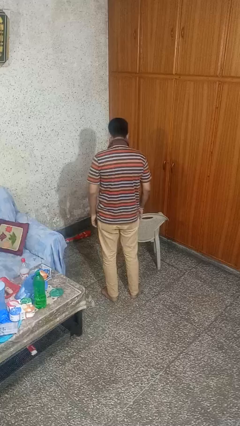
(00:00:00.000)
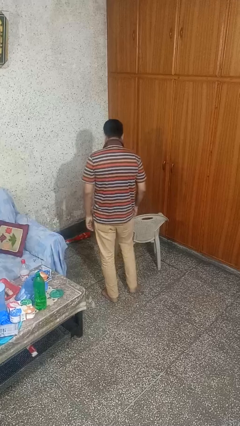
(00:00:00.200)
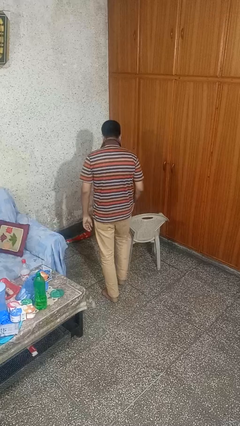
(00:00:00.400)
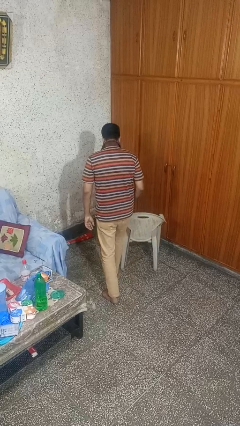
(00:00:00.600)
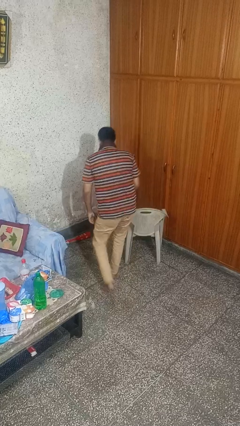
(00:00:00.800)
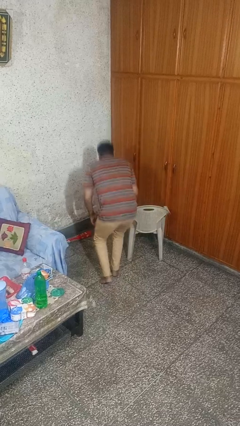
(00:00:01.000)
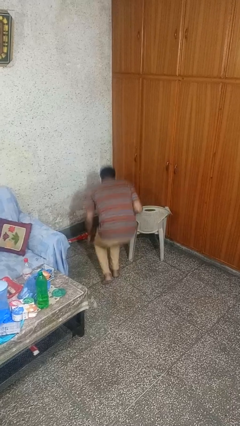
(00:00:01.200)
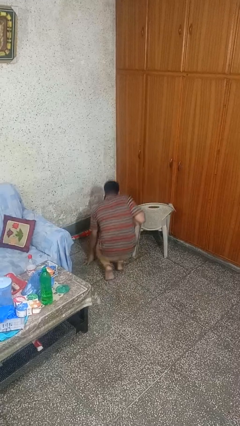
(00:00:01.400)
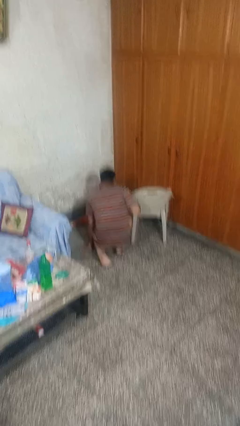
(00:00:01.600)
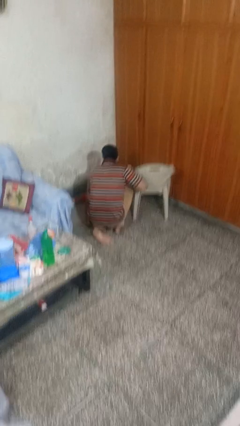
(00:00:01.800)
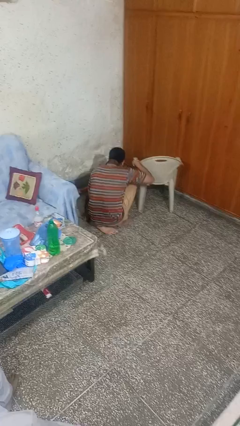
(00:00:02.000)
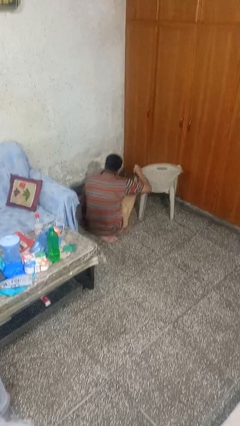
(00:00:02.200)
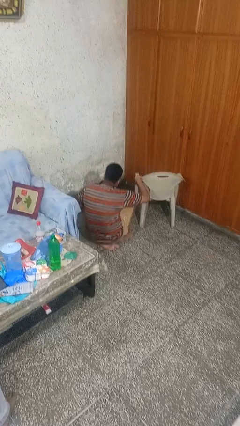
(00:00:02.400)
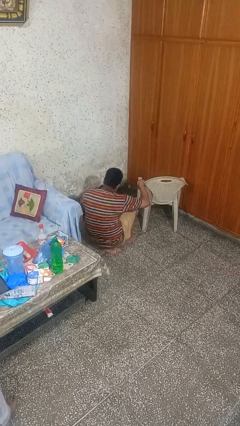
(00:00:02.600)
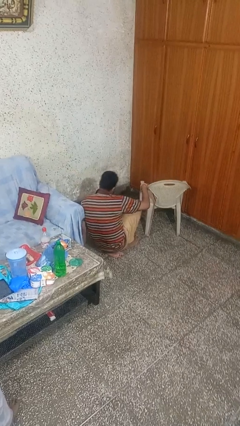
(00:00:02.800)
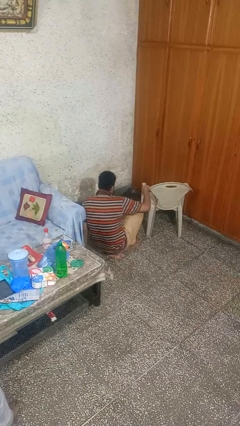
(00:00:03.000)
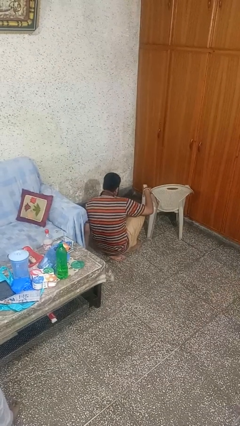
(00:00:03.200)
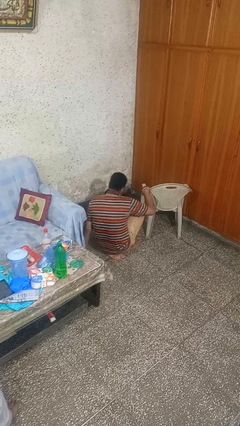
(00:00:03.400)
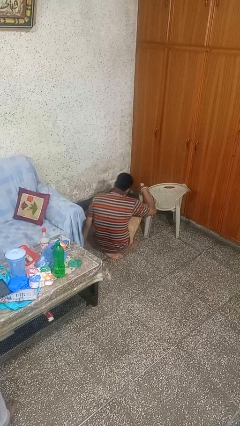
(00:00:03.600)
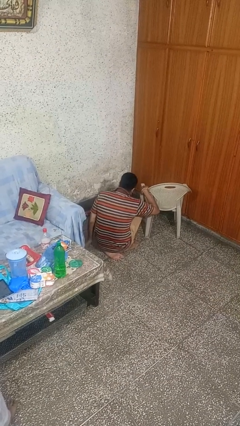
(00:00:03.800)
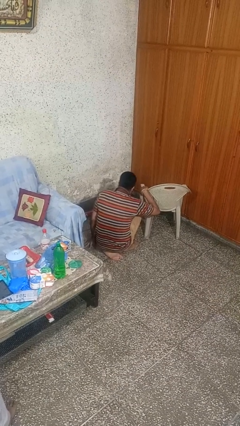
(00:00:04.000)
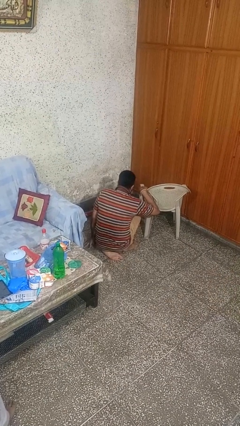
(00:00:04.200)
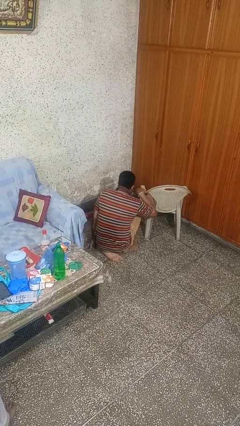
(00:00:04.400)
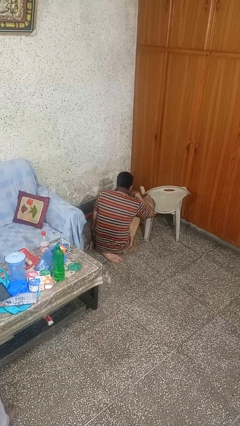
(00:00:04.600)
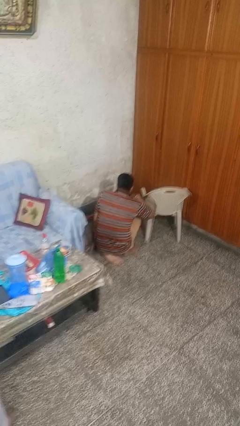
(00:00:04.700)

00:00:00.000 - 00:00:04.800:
person trips on object on floor

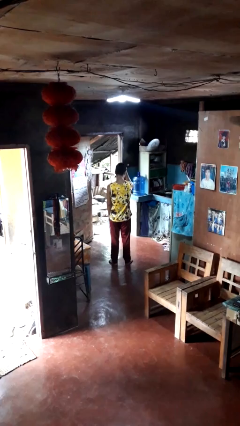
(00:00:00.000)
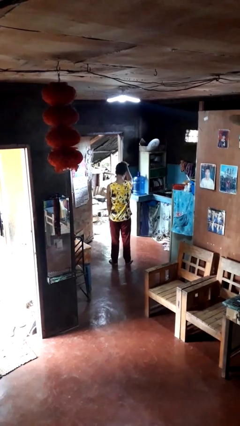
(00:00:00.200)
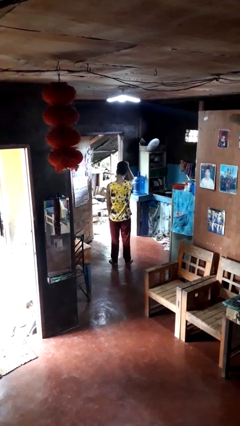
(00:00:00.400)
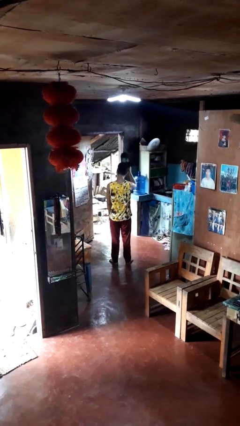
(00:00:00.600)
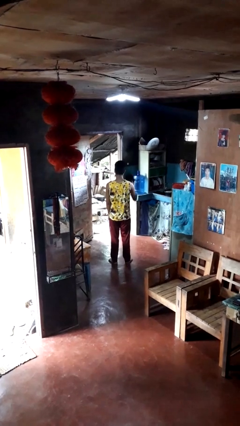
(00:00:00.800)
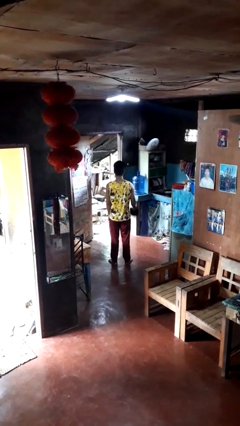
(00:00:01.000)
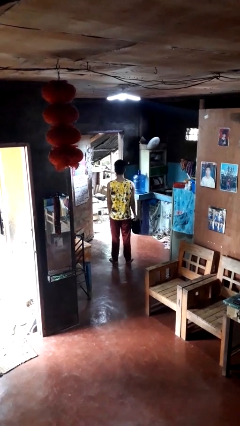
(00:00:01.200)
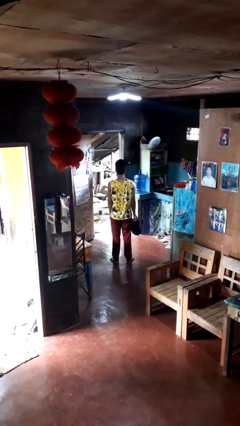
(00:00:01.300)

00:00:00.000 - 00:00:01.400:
person takes off hat

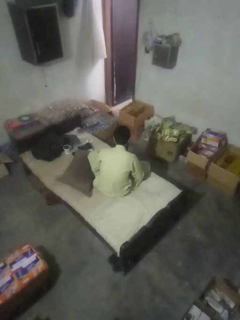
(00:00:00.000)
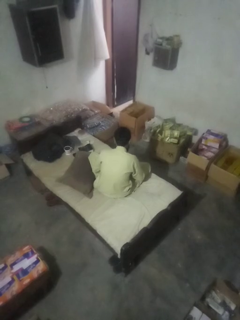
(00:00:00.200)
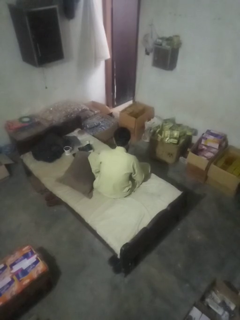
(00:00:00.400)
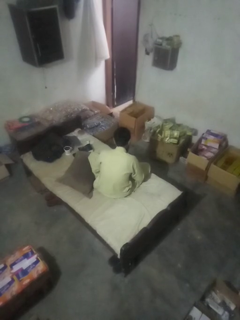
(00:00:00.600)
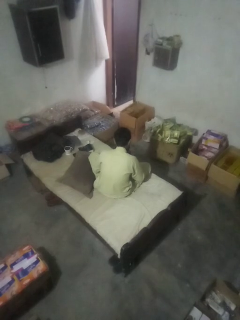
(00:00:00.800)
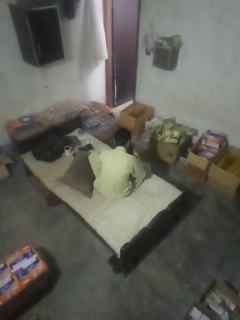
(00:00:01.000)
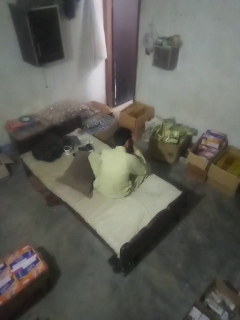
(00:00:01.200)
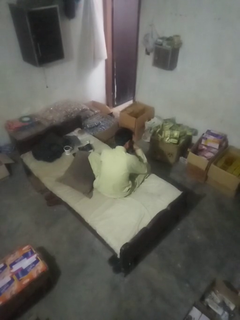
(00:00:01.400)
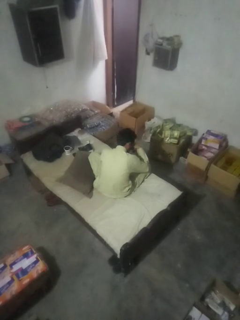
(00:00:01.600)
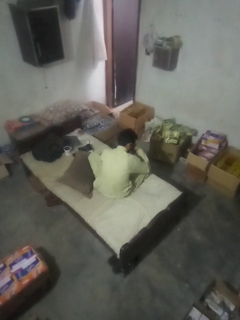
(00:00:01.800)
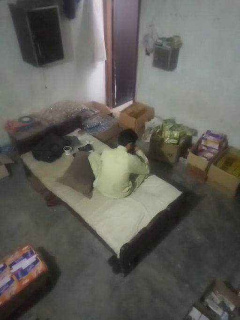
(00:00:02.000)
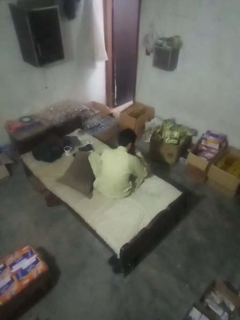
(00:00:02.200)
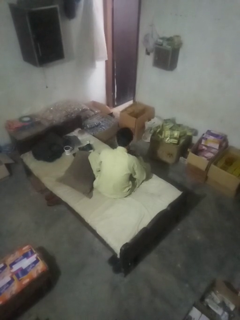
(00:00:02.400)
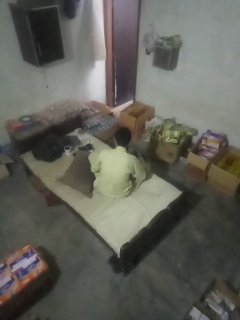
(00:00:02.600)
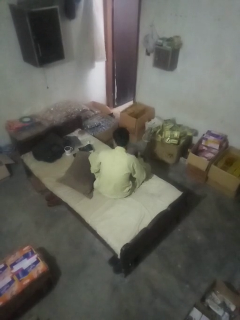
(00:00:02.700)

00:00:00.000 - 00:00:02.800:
person blows nose

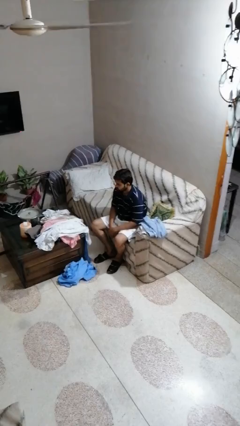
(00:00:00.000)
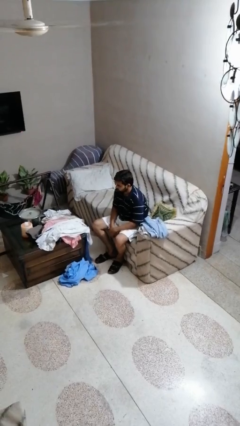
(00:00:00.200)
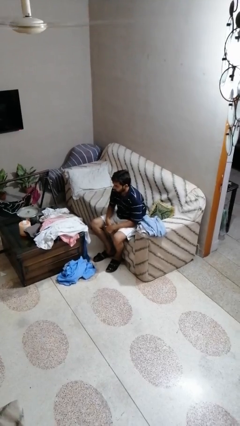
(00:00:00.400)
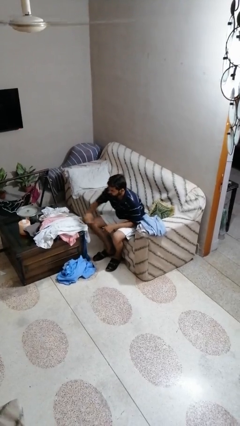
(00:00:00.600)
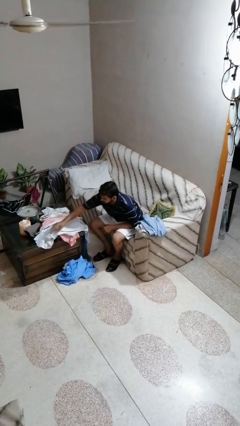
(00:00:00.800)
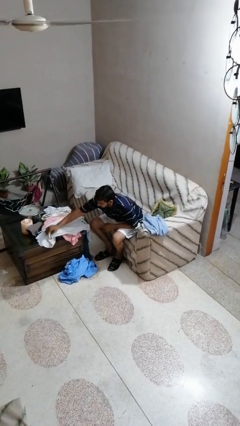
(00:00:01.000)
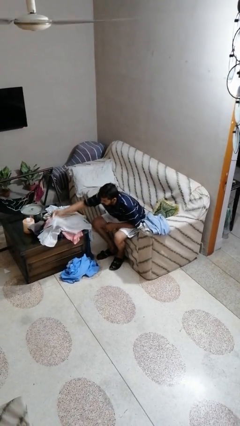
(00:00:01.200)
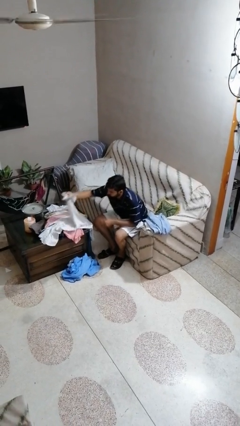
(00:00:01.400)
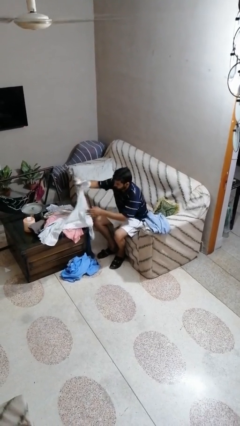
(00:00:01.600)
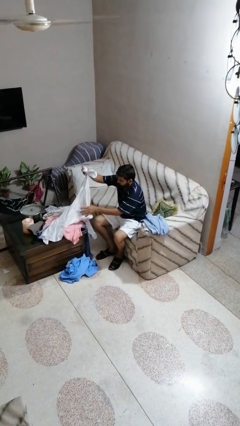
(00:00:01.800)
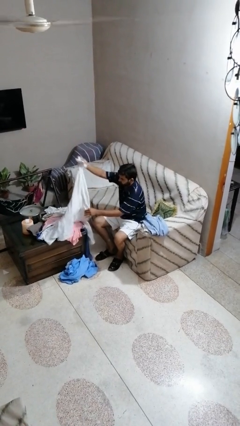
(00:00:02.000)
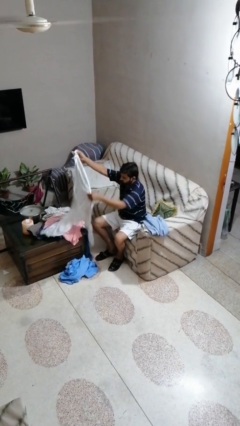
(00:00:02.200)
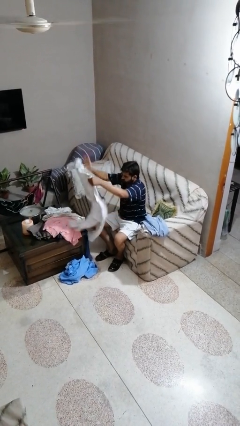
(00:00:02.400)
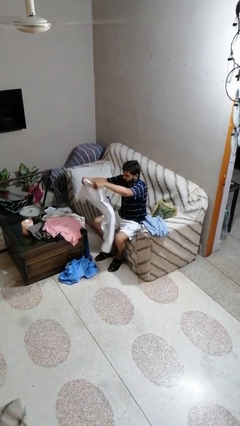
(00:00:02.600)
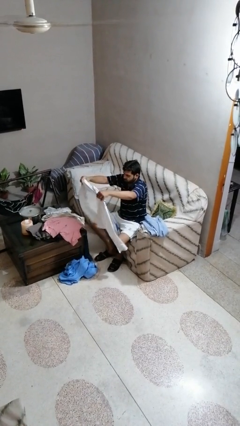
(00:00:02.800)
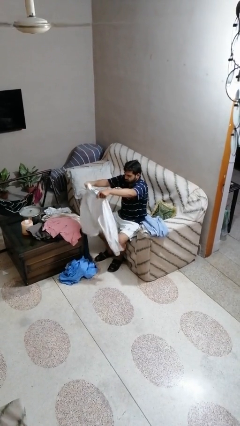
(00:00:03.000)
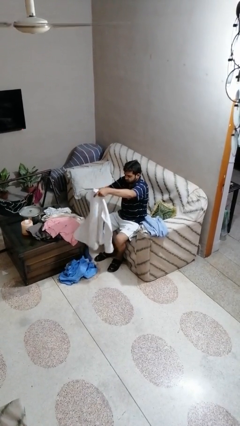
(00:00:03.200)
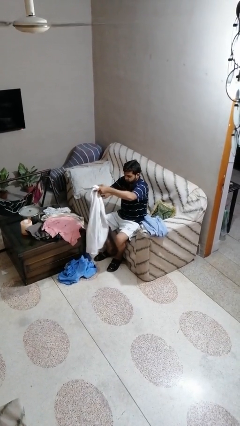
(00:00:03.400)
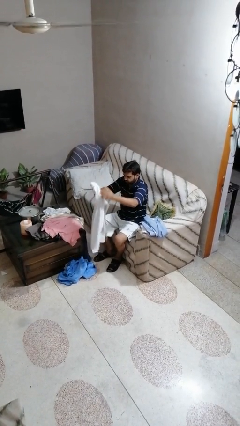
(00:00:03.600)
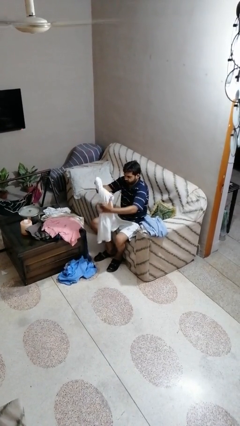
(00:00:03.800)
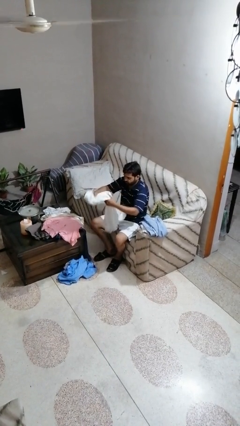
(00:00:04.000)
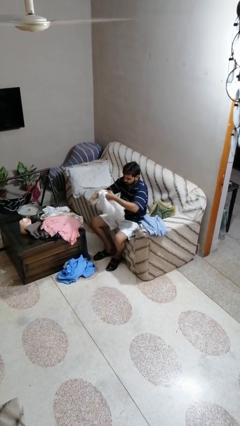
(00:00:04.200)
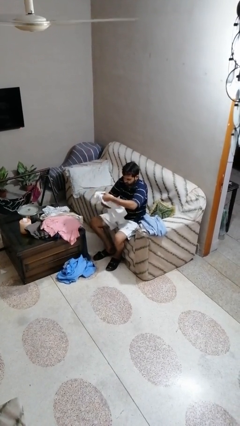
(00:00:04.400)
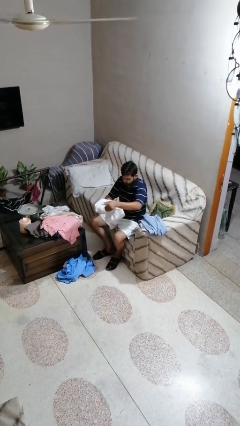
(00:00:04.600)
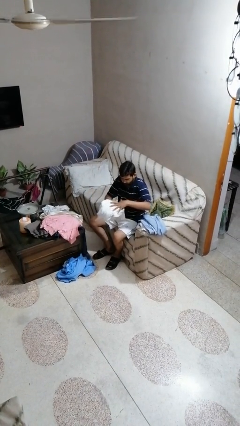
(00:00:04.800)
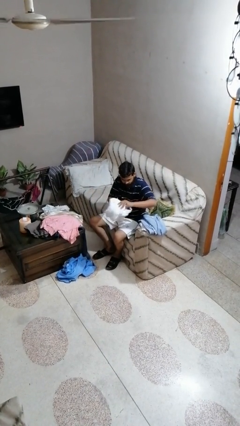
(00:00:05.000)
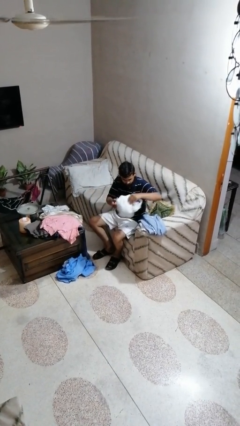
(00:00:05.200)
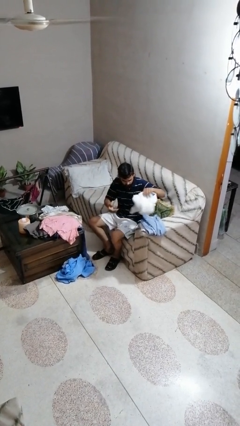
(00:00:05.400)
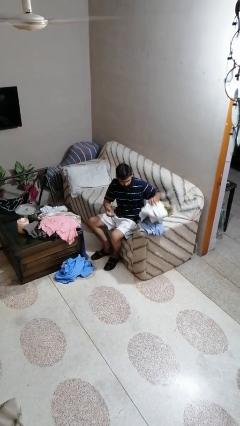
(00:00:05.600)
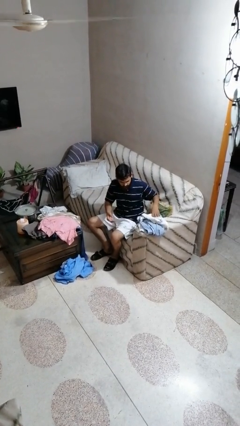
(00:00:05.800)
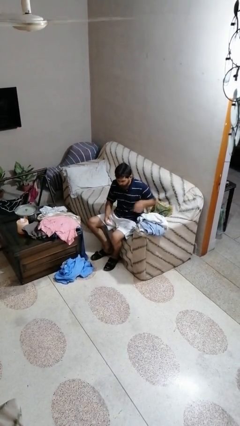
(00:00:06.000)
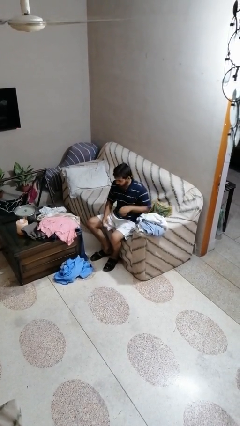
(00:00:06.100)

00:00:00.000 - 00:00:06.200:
person folds shirt

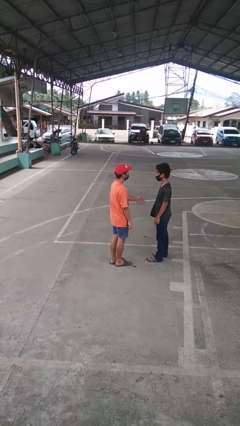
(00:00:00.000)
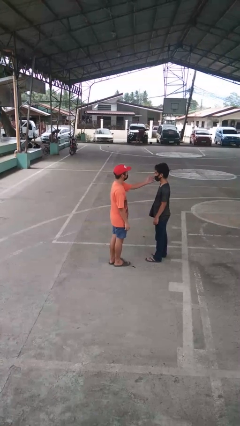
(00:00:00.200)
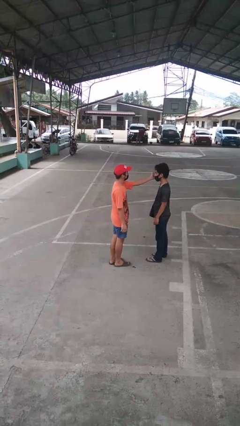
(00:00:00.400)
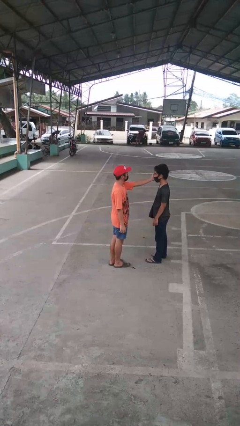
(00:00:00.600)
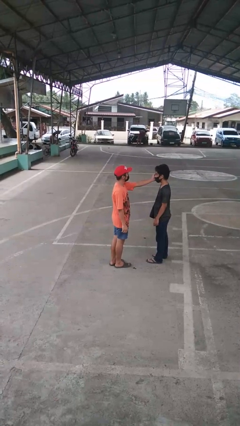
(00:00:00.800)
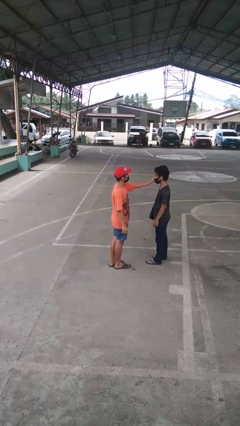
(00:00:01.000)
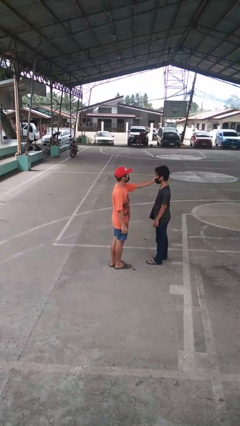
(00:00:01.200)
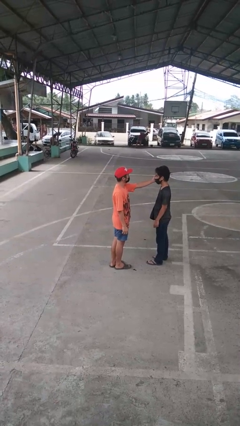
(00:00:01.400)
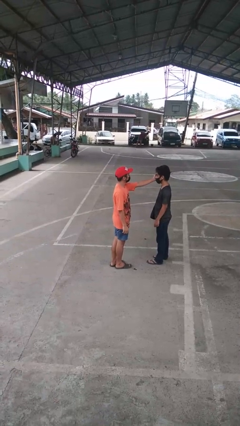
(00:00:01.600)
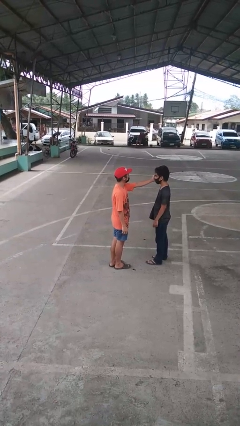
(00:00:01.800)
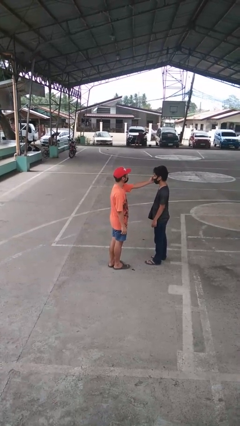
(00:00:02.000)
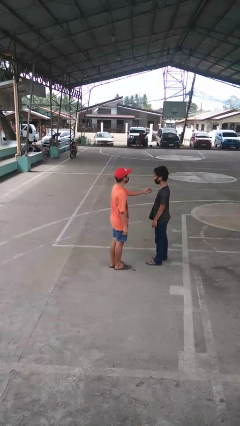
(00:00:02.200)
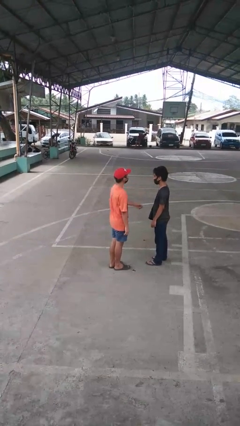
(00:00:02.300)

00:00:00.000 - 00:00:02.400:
person touches face of person

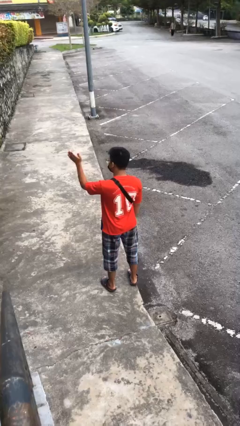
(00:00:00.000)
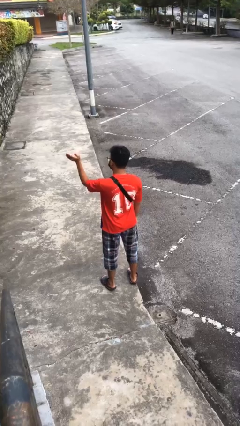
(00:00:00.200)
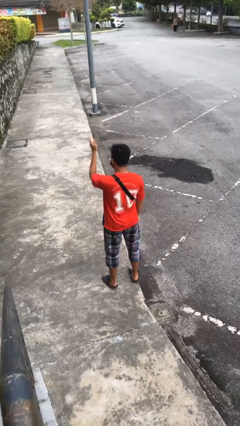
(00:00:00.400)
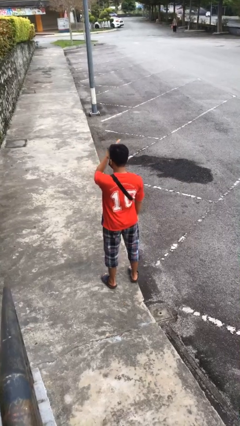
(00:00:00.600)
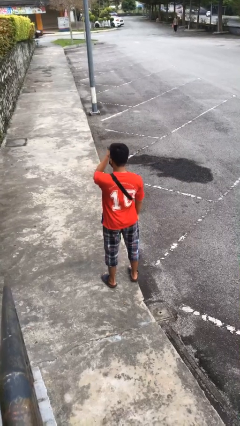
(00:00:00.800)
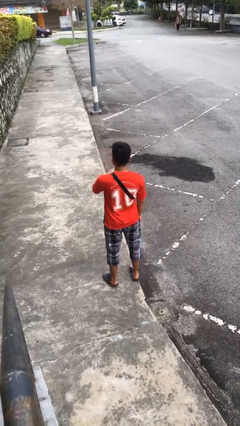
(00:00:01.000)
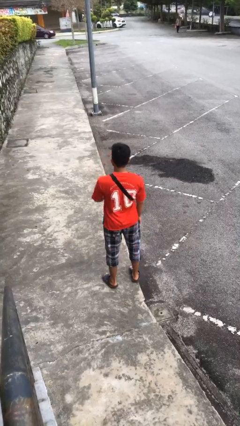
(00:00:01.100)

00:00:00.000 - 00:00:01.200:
person gestures swipe right
